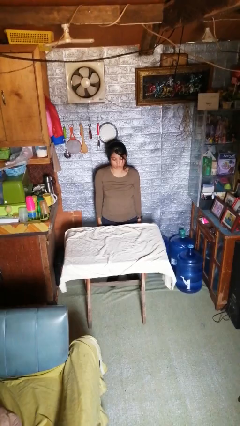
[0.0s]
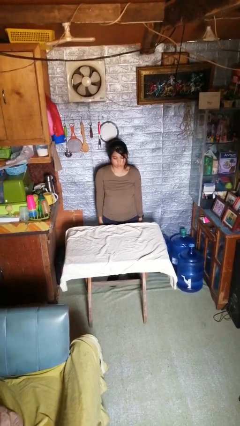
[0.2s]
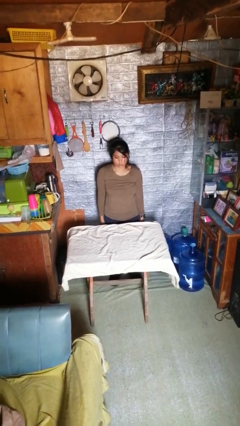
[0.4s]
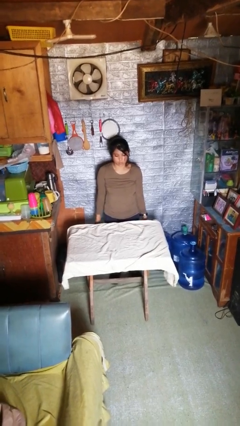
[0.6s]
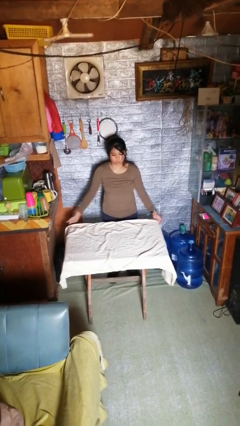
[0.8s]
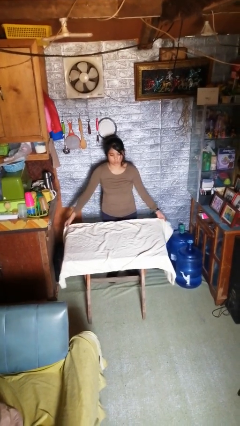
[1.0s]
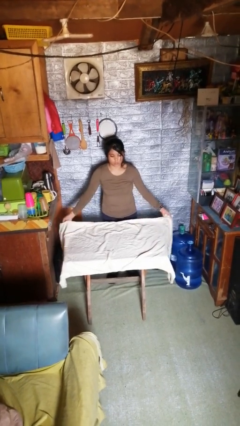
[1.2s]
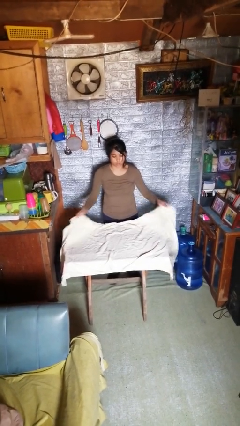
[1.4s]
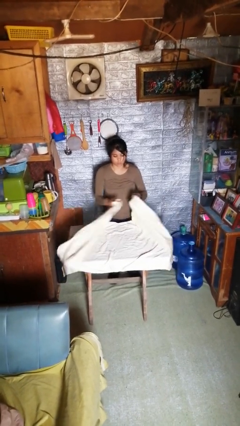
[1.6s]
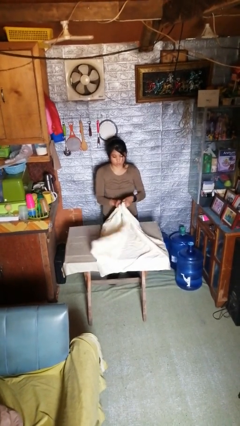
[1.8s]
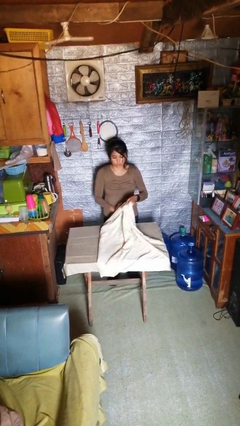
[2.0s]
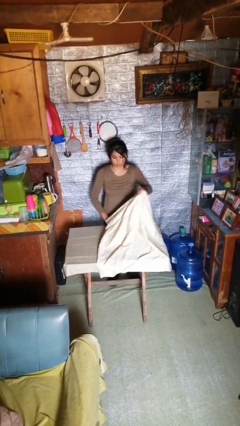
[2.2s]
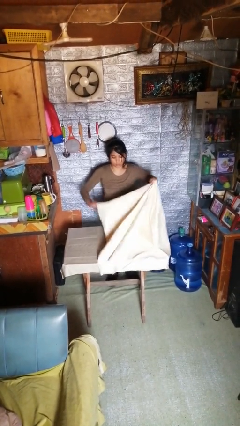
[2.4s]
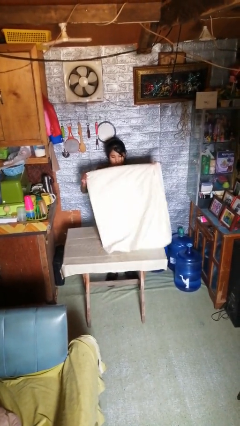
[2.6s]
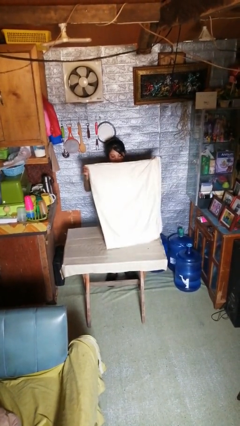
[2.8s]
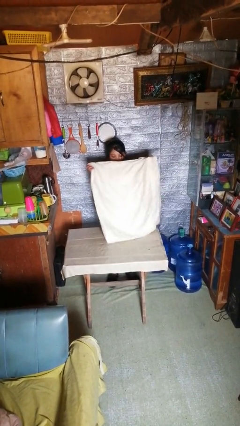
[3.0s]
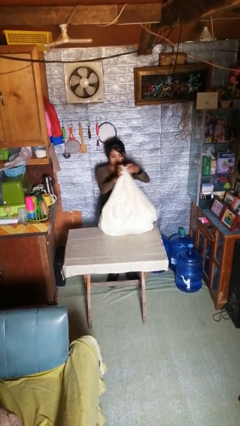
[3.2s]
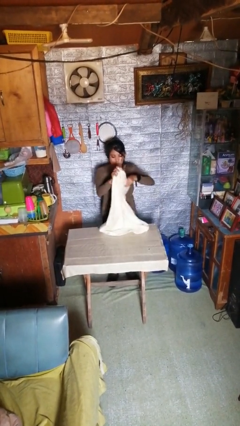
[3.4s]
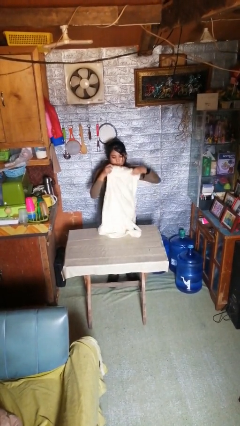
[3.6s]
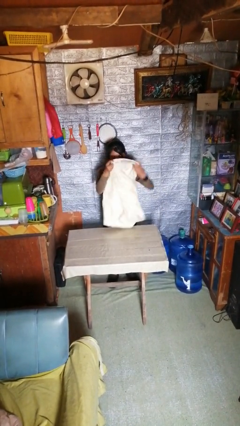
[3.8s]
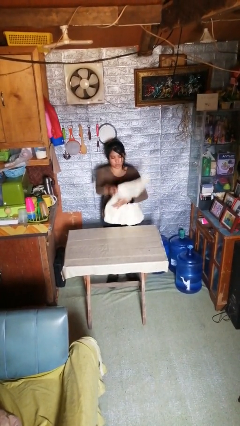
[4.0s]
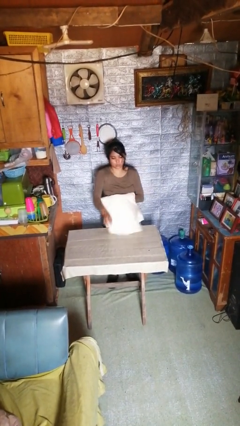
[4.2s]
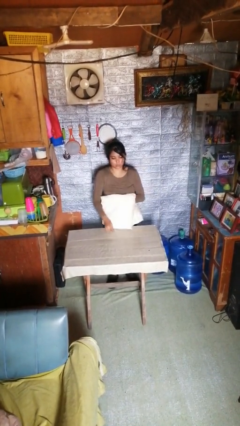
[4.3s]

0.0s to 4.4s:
person folds tablecloth

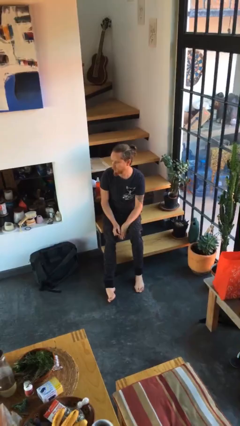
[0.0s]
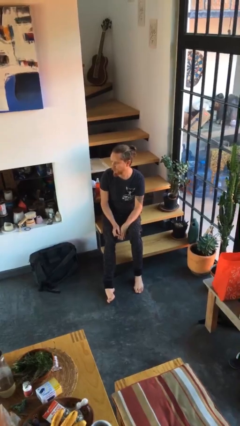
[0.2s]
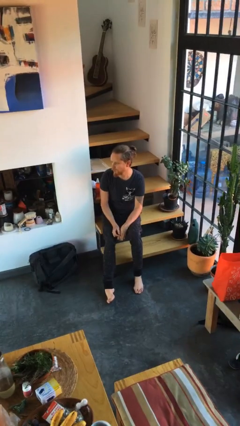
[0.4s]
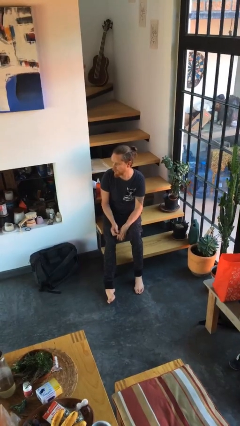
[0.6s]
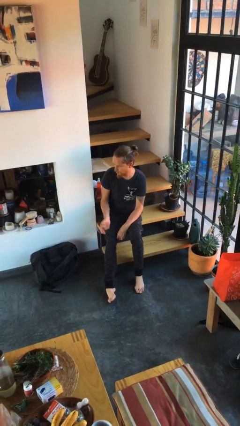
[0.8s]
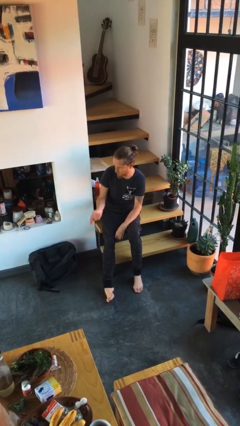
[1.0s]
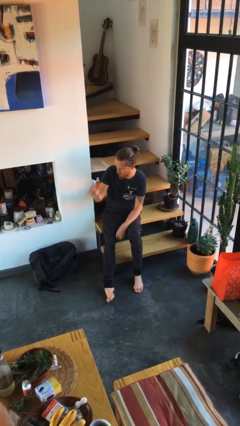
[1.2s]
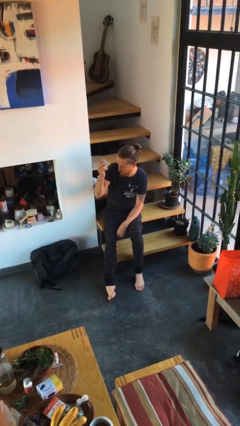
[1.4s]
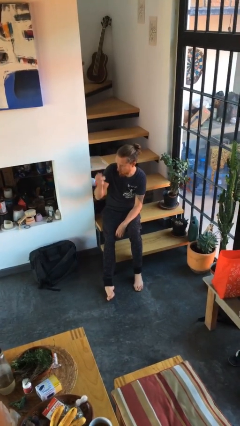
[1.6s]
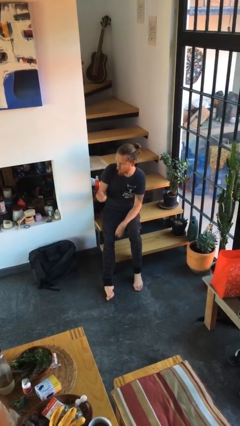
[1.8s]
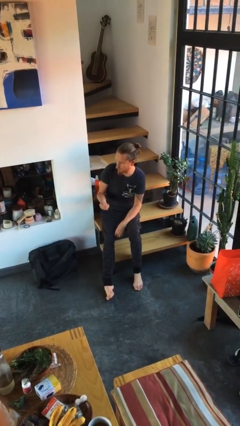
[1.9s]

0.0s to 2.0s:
person gestures swipe up

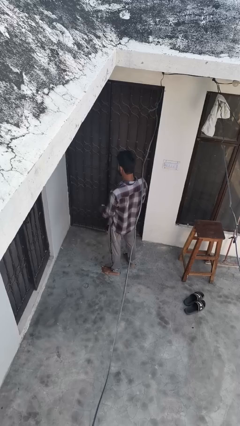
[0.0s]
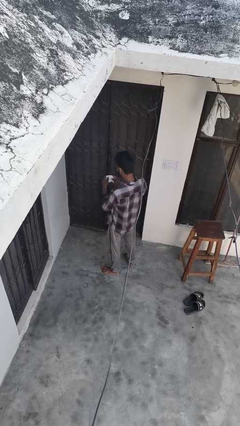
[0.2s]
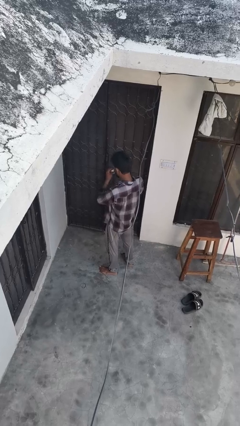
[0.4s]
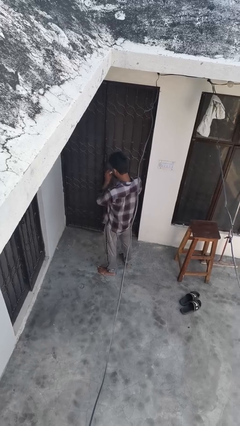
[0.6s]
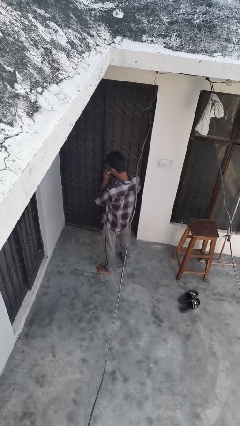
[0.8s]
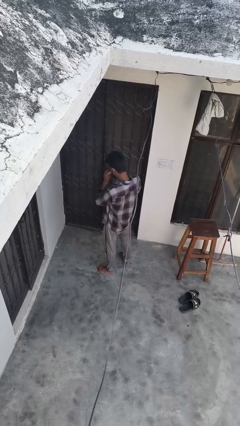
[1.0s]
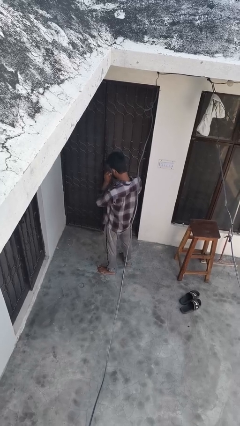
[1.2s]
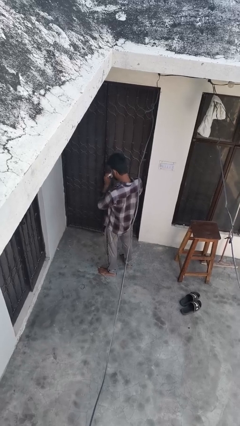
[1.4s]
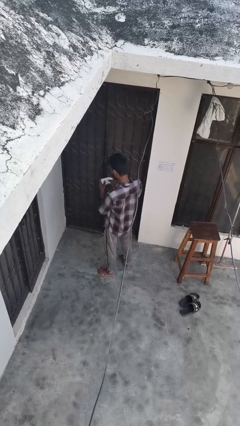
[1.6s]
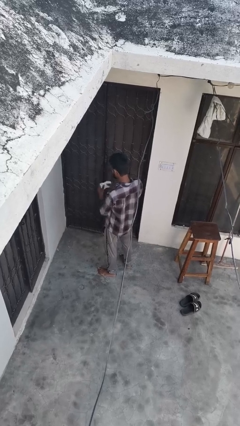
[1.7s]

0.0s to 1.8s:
person wipes mouth with napkin

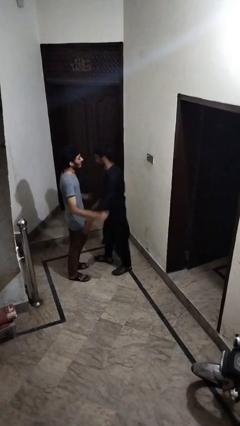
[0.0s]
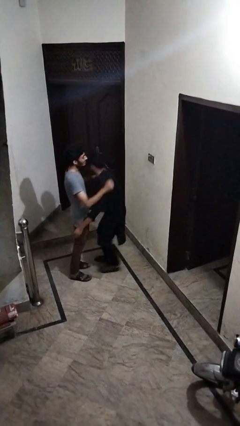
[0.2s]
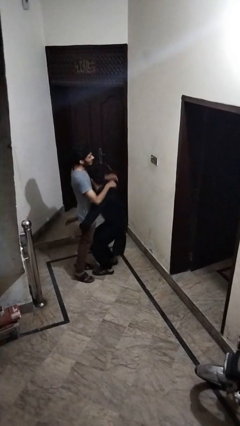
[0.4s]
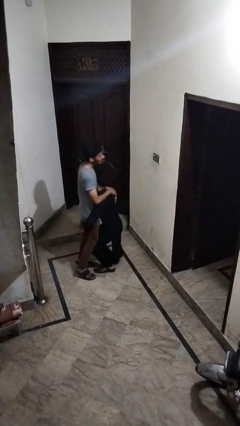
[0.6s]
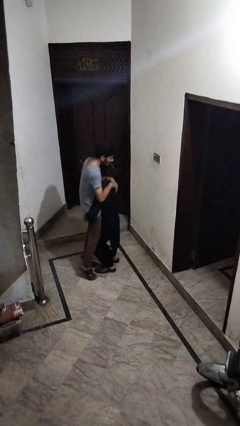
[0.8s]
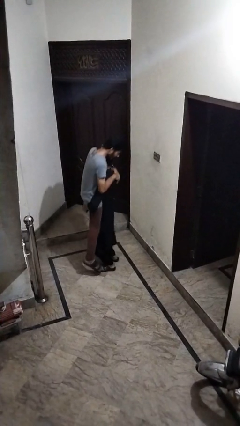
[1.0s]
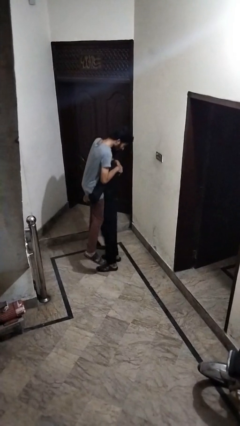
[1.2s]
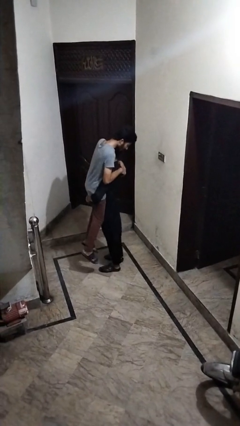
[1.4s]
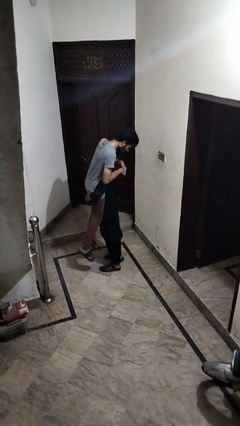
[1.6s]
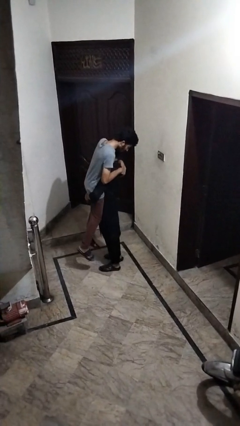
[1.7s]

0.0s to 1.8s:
person picks up person

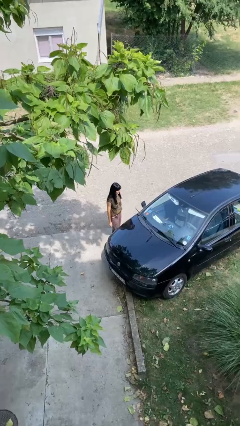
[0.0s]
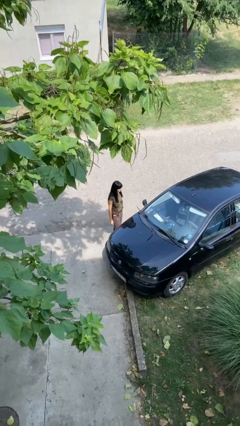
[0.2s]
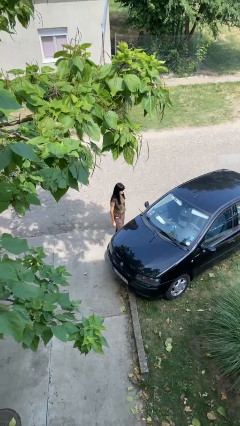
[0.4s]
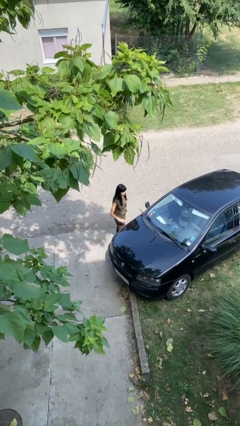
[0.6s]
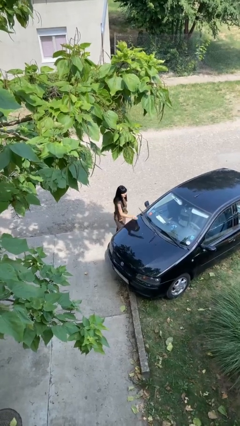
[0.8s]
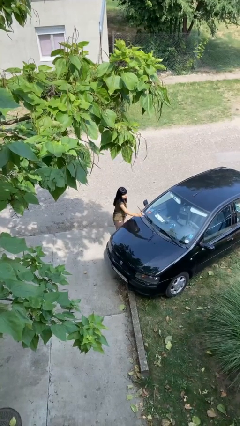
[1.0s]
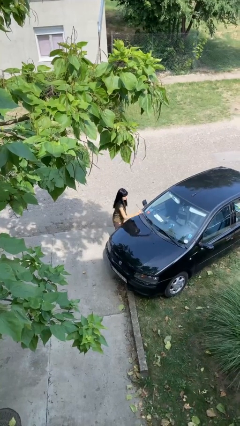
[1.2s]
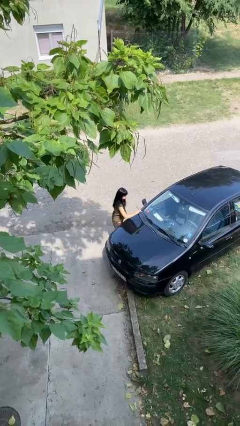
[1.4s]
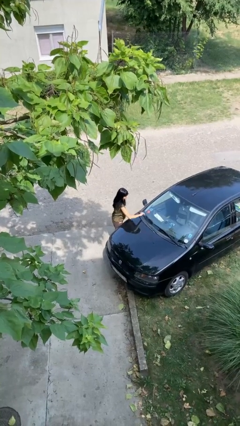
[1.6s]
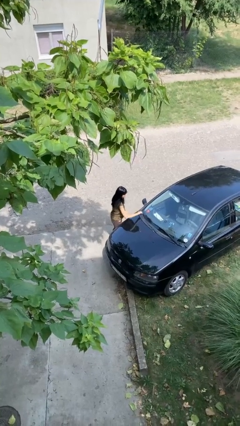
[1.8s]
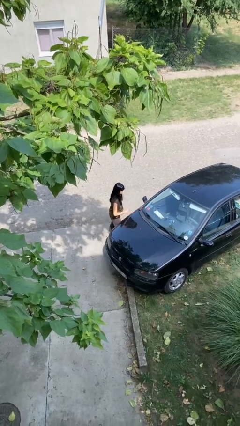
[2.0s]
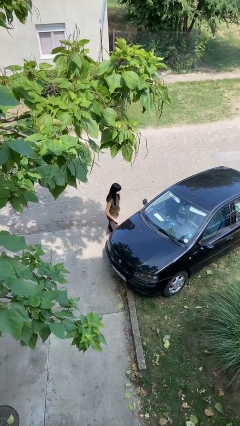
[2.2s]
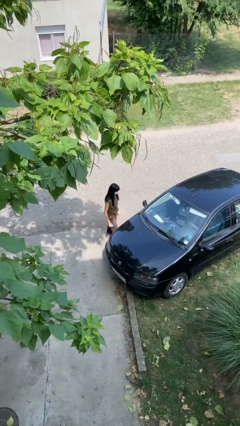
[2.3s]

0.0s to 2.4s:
person flips down car wipers

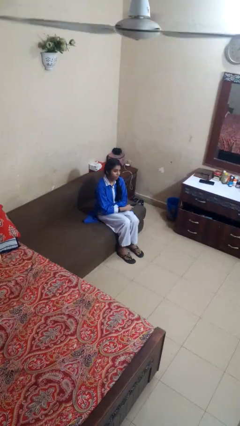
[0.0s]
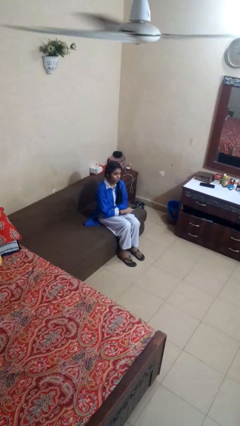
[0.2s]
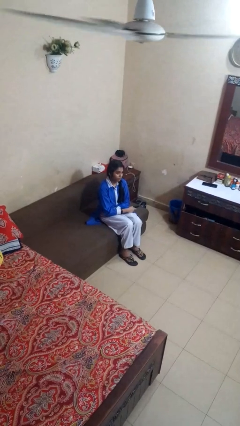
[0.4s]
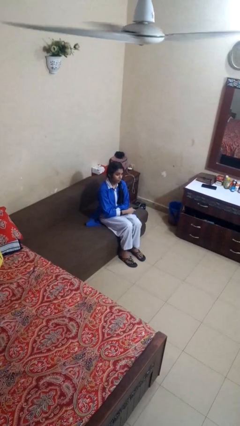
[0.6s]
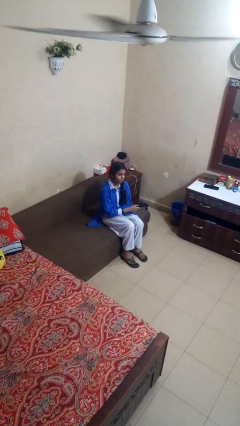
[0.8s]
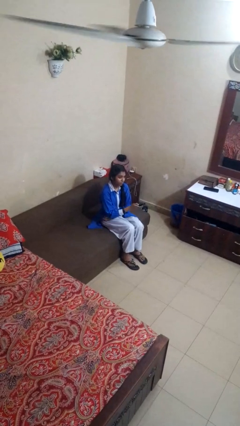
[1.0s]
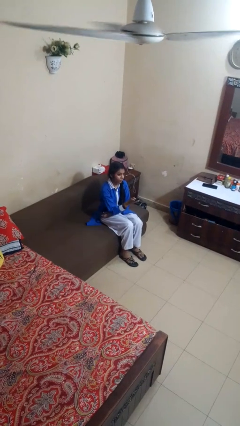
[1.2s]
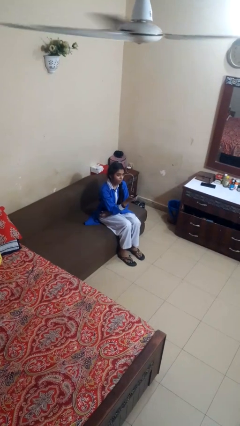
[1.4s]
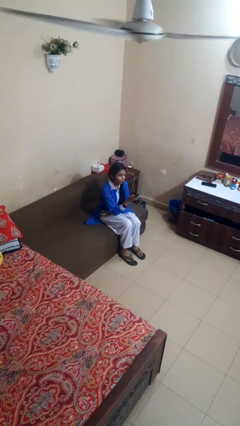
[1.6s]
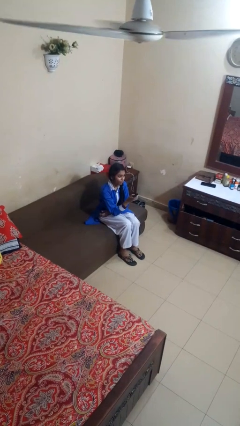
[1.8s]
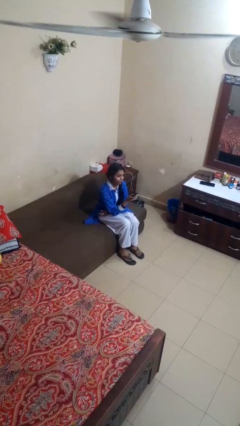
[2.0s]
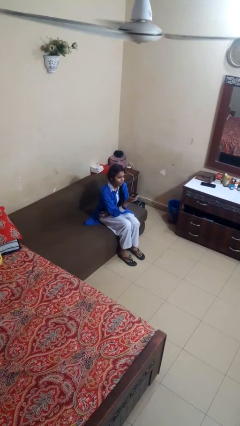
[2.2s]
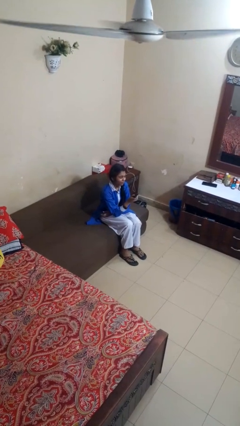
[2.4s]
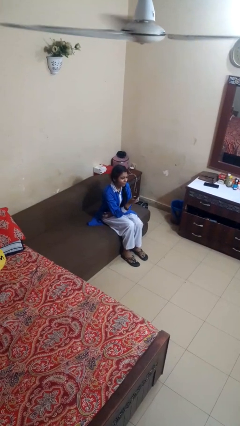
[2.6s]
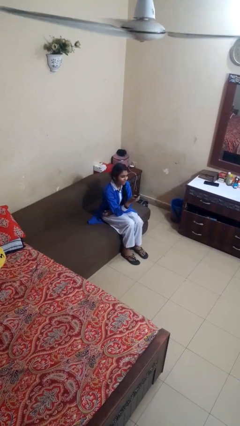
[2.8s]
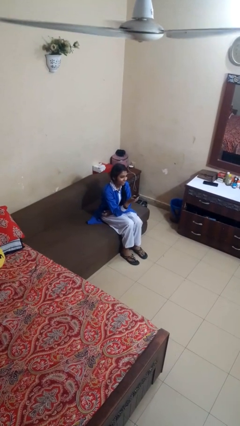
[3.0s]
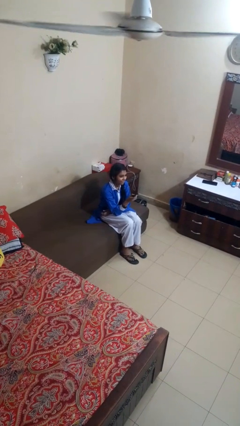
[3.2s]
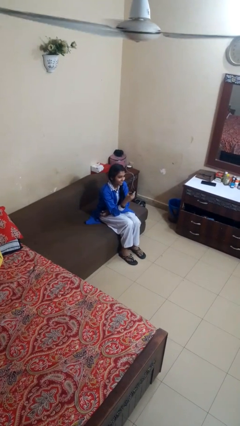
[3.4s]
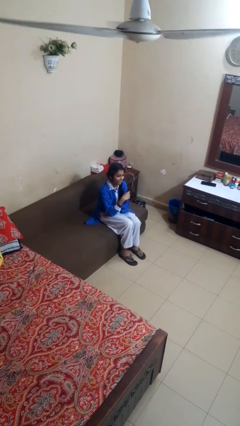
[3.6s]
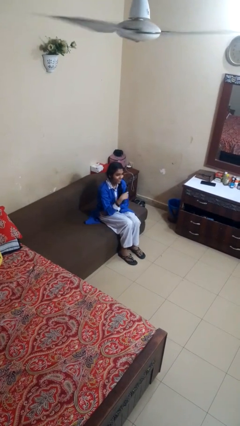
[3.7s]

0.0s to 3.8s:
person uses television remote

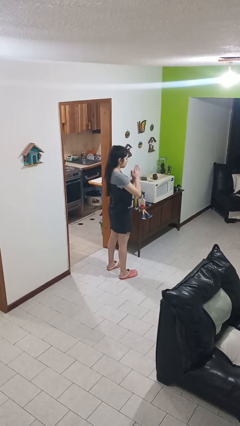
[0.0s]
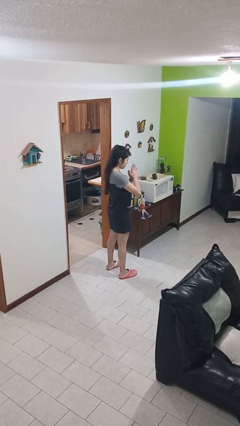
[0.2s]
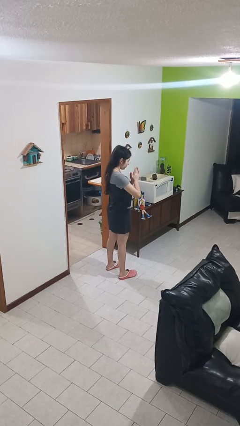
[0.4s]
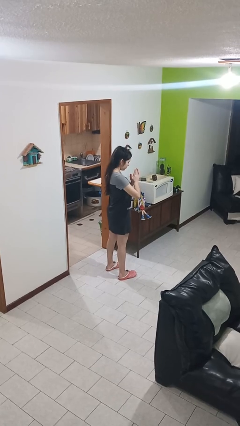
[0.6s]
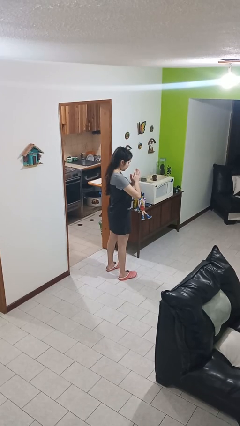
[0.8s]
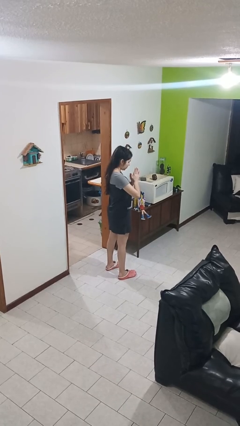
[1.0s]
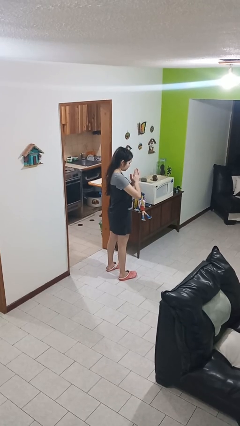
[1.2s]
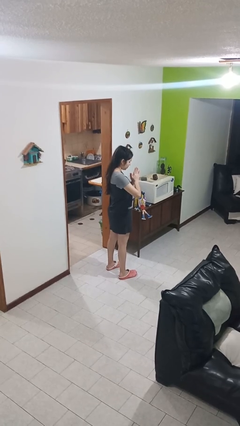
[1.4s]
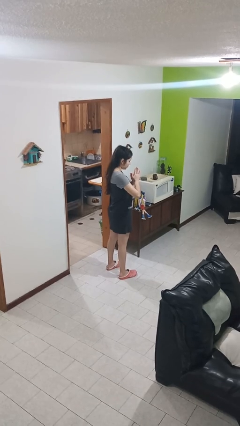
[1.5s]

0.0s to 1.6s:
person prays
